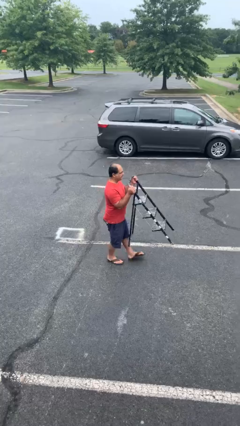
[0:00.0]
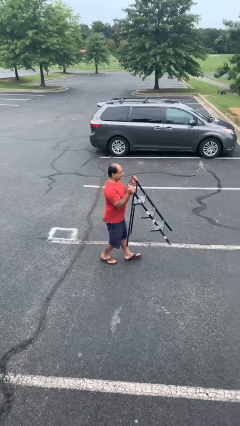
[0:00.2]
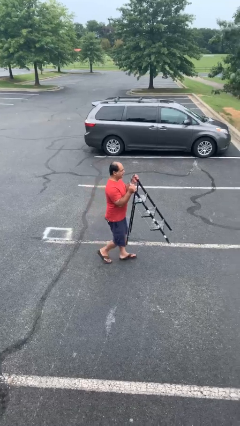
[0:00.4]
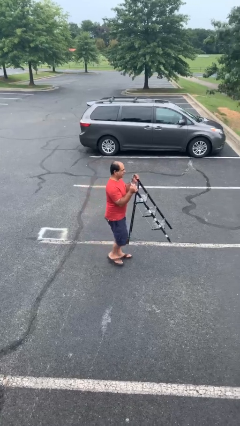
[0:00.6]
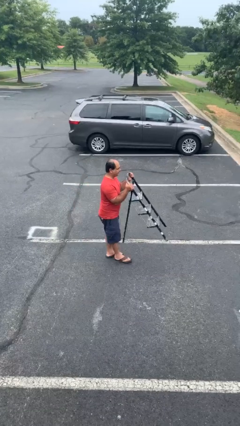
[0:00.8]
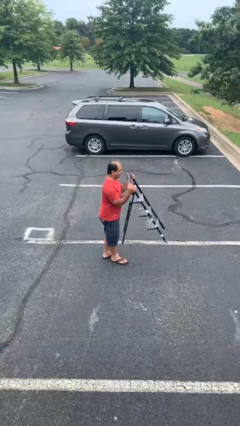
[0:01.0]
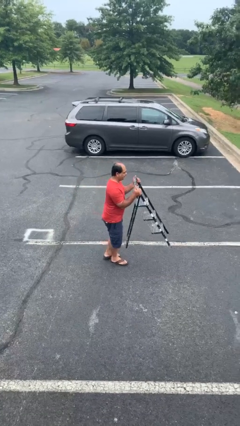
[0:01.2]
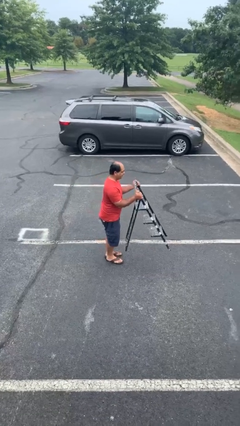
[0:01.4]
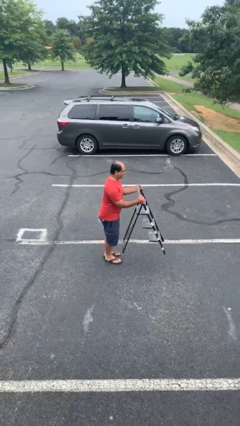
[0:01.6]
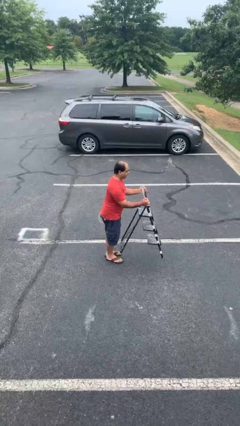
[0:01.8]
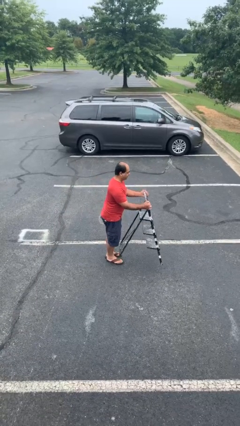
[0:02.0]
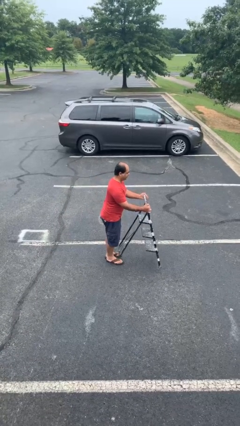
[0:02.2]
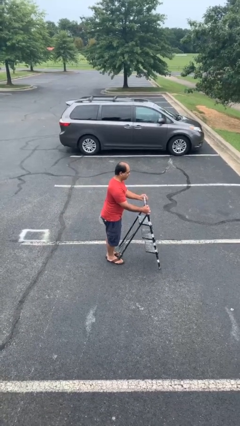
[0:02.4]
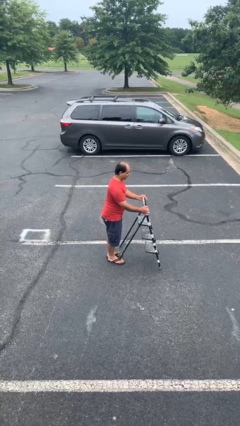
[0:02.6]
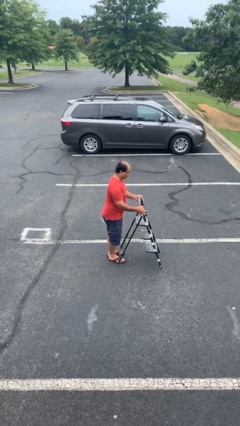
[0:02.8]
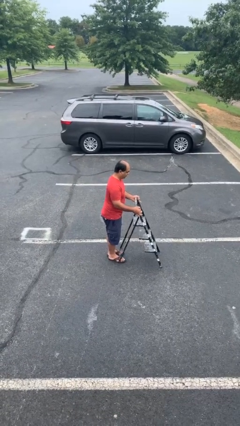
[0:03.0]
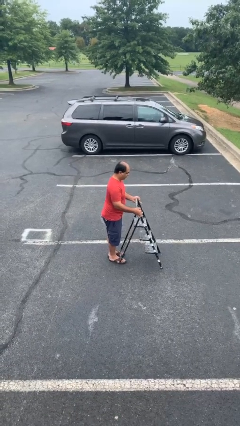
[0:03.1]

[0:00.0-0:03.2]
person puts down object on floor

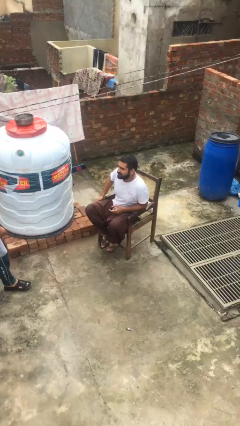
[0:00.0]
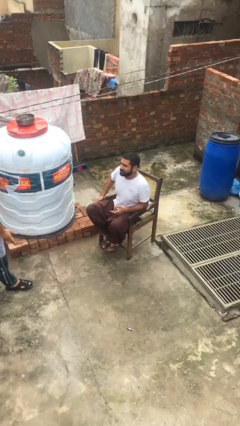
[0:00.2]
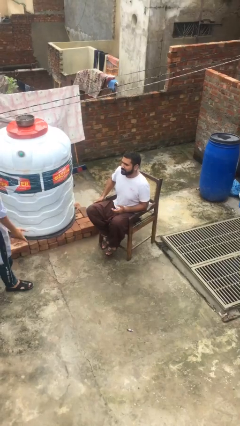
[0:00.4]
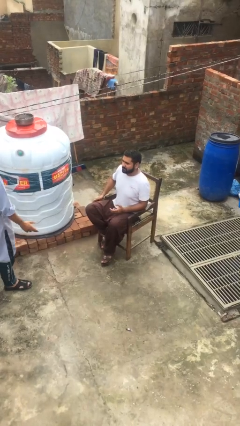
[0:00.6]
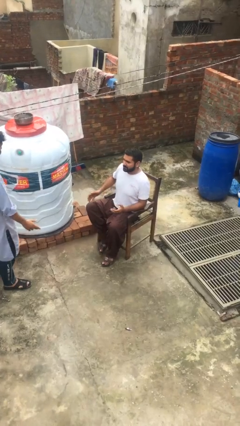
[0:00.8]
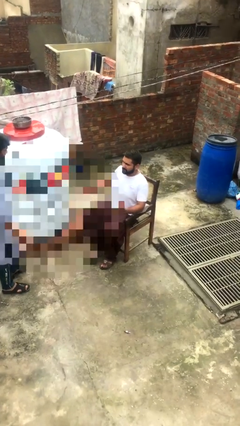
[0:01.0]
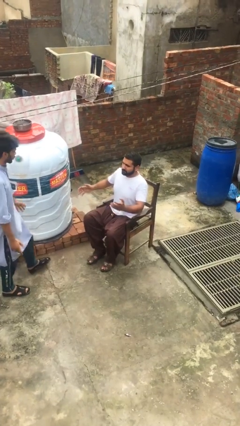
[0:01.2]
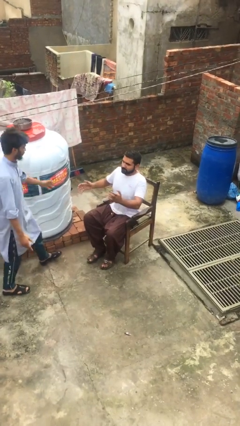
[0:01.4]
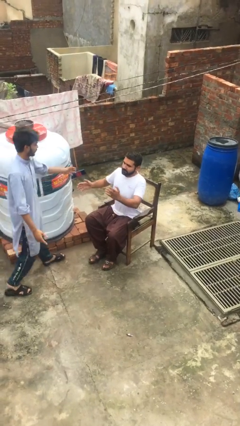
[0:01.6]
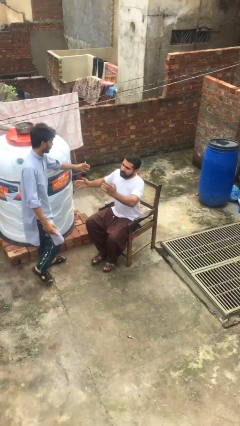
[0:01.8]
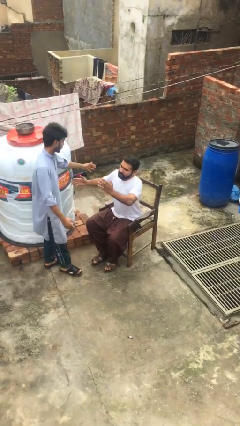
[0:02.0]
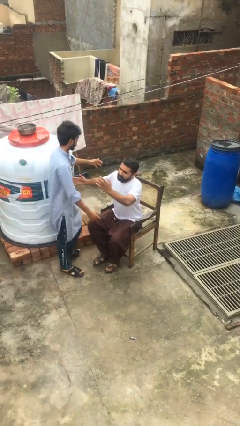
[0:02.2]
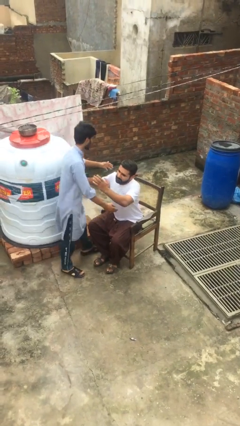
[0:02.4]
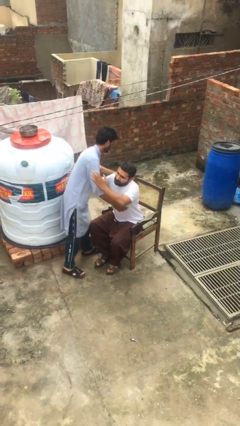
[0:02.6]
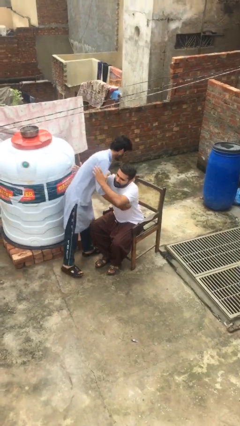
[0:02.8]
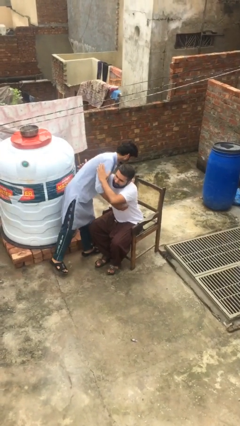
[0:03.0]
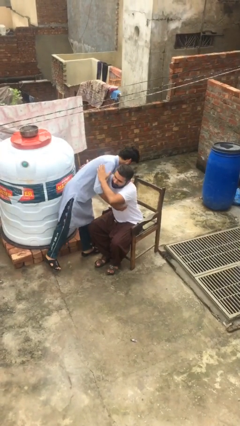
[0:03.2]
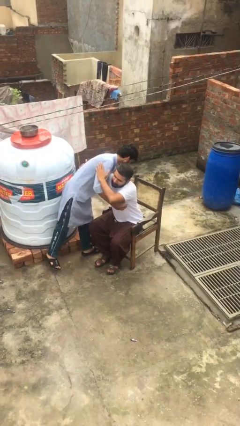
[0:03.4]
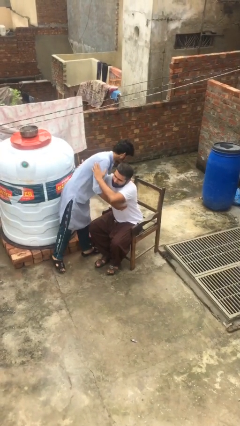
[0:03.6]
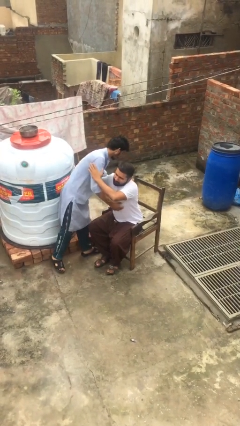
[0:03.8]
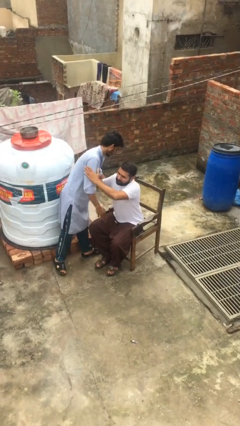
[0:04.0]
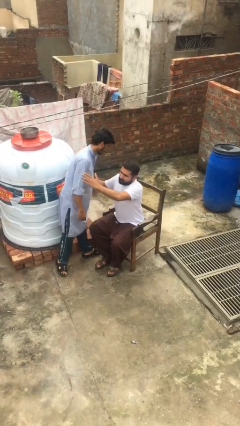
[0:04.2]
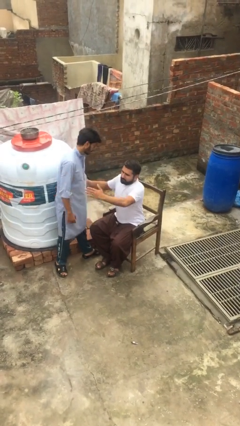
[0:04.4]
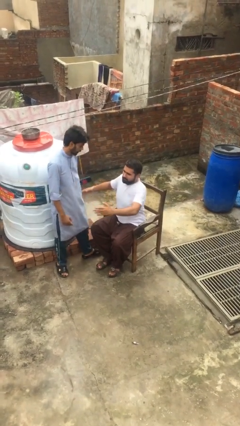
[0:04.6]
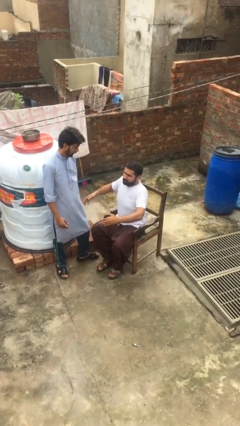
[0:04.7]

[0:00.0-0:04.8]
person embraces person

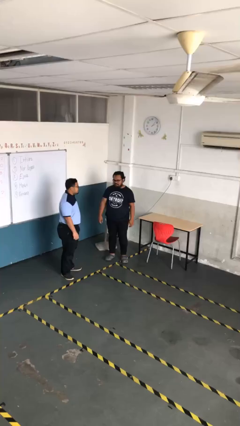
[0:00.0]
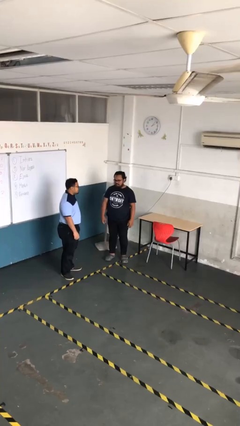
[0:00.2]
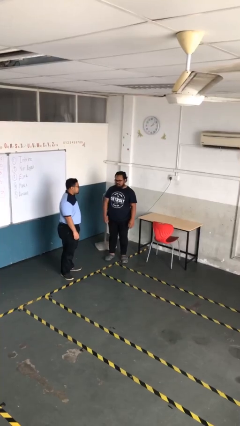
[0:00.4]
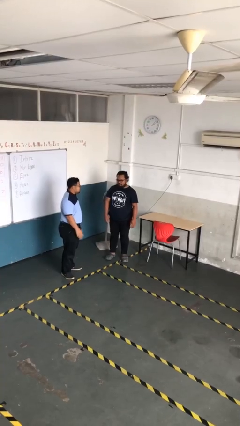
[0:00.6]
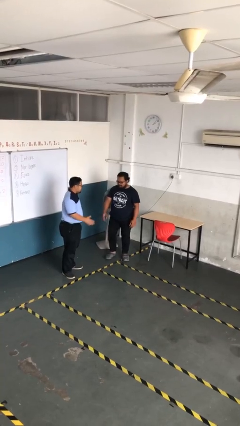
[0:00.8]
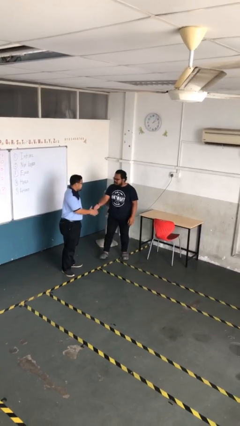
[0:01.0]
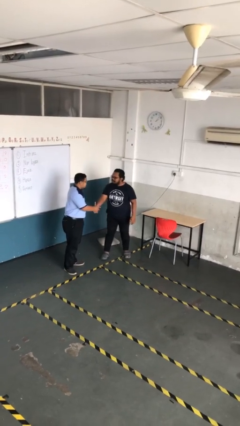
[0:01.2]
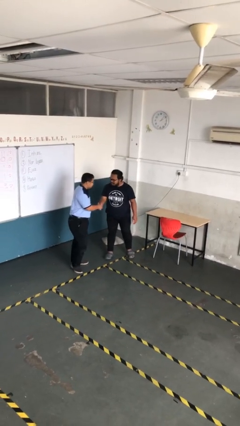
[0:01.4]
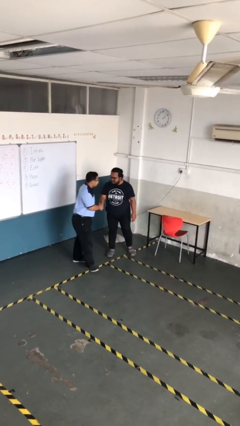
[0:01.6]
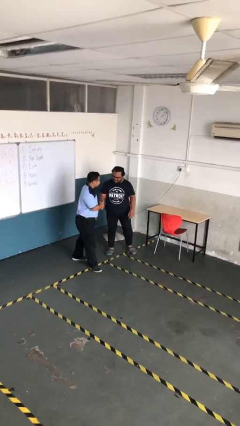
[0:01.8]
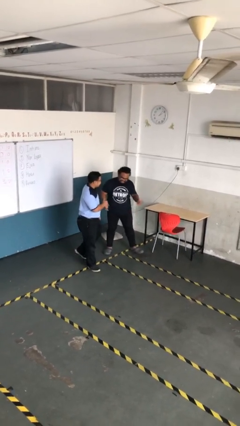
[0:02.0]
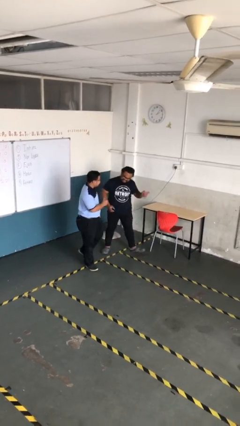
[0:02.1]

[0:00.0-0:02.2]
person shakes hand

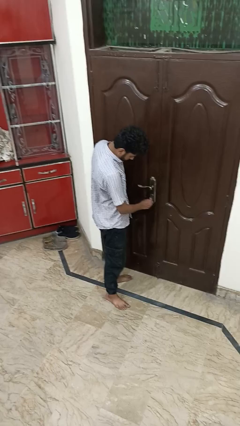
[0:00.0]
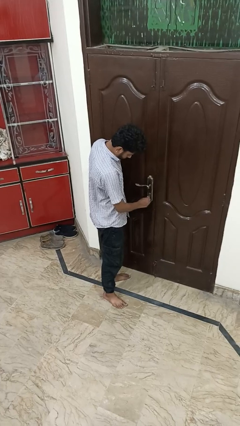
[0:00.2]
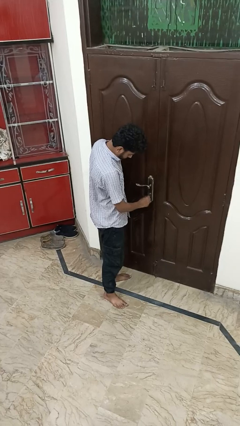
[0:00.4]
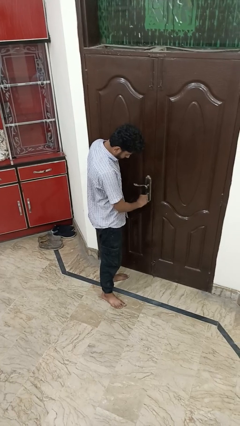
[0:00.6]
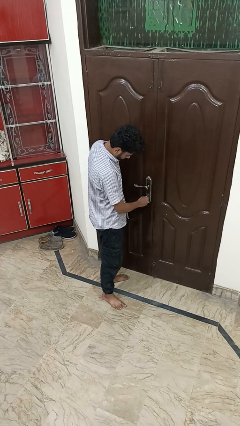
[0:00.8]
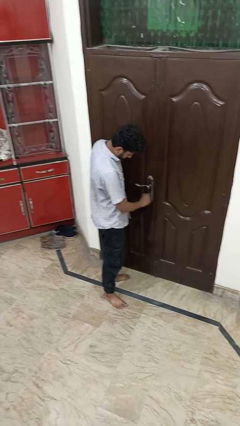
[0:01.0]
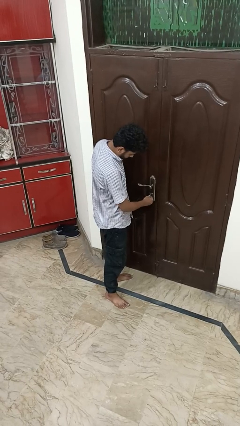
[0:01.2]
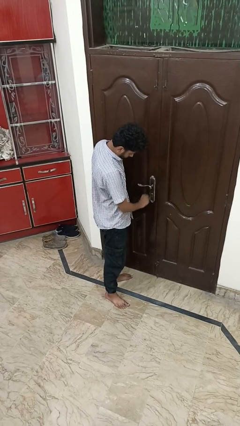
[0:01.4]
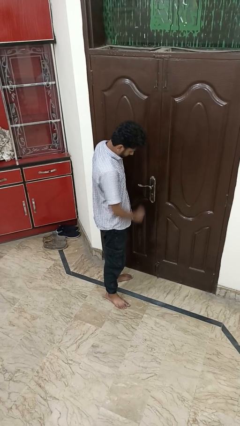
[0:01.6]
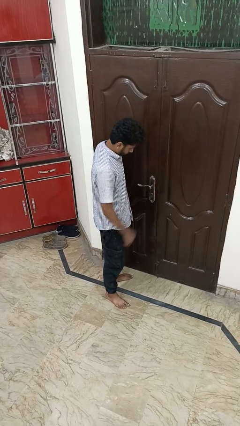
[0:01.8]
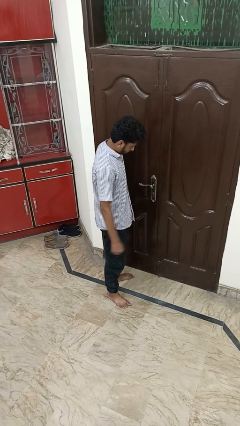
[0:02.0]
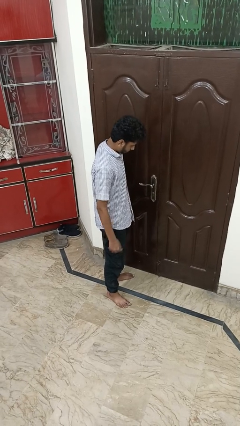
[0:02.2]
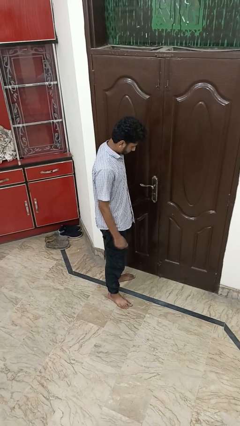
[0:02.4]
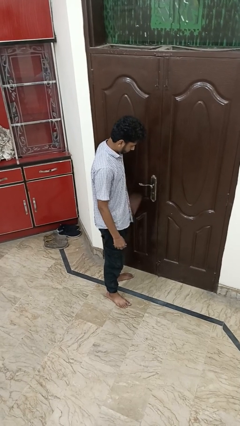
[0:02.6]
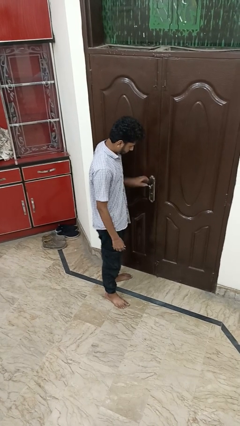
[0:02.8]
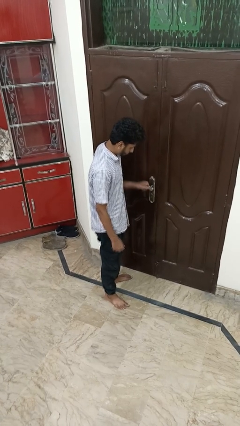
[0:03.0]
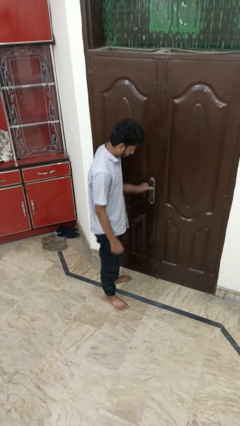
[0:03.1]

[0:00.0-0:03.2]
person unlocks door with keys

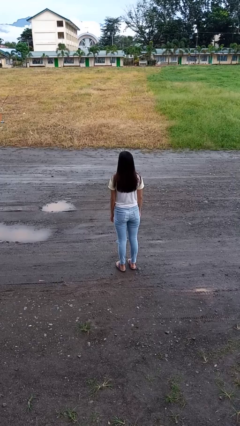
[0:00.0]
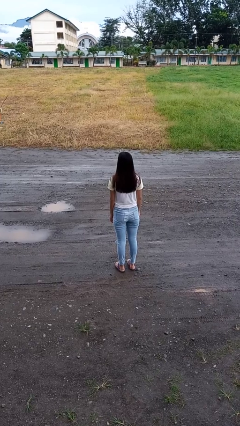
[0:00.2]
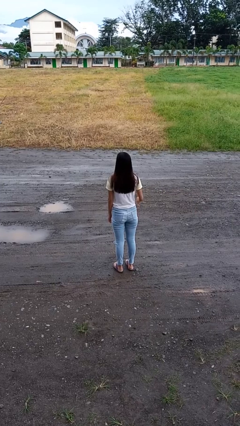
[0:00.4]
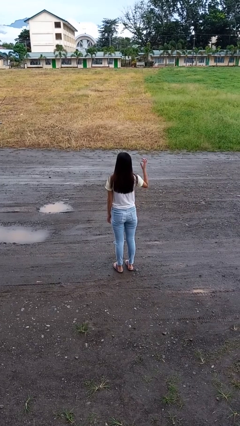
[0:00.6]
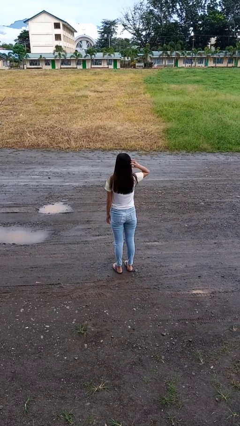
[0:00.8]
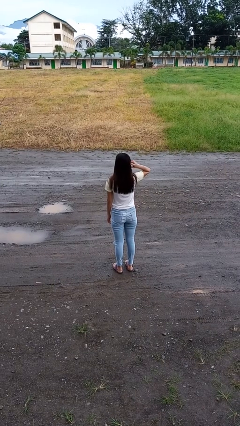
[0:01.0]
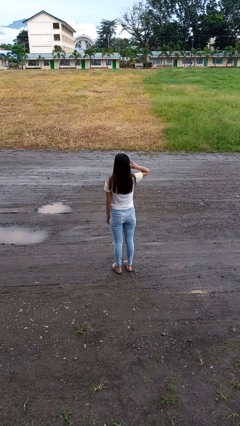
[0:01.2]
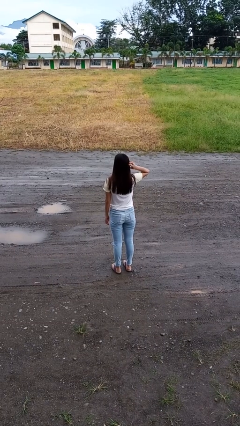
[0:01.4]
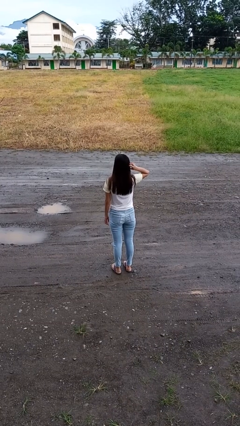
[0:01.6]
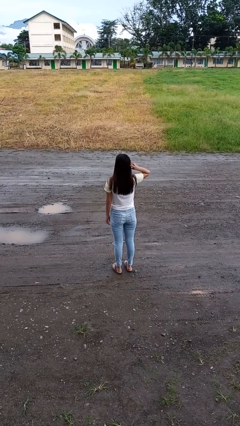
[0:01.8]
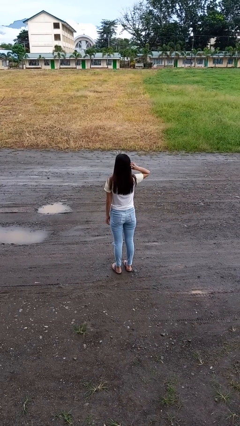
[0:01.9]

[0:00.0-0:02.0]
person scratches face

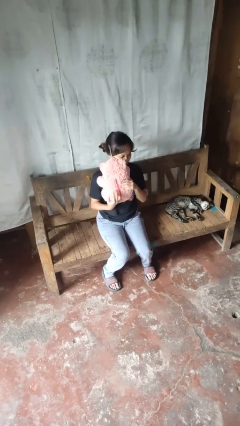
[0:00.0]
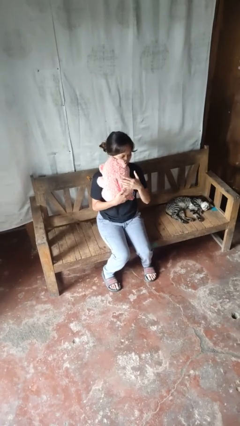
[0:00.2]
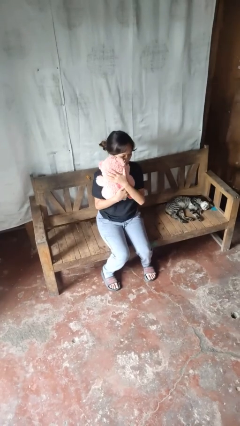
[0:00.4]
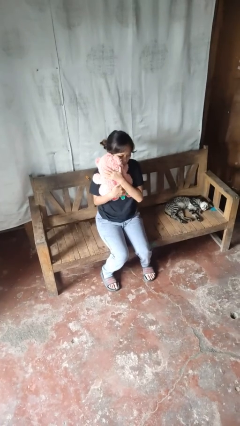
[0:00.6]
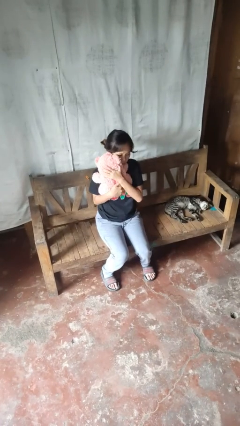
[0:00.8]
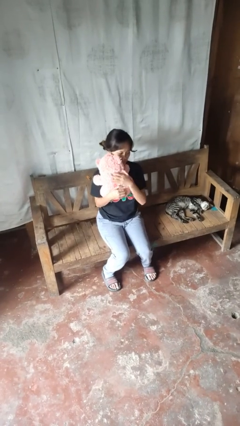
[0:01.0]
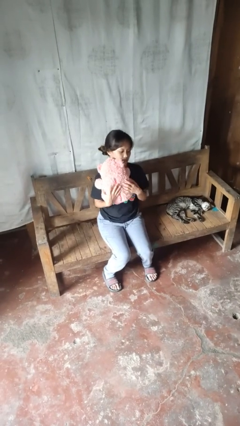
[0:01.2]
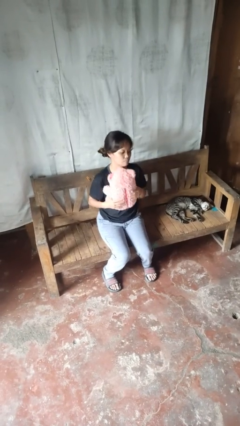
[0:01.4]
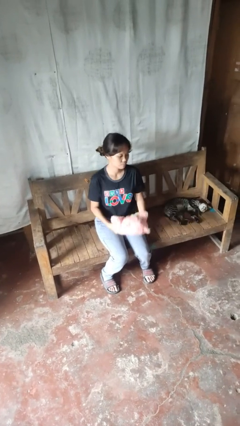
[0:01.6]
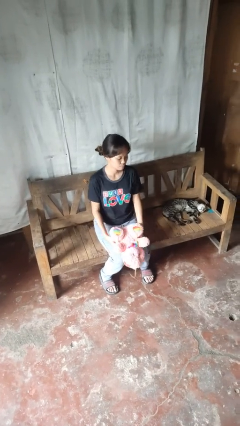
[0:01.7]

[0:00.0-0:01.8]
person hugs stuffed animal
